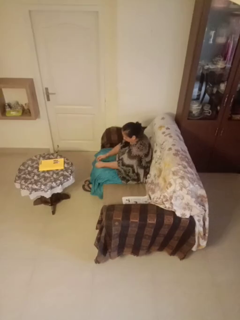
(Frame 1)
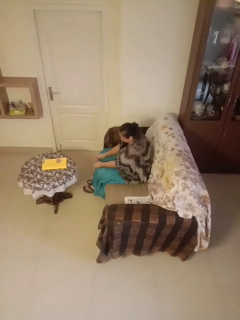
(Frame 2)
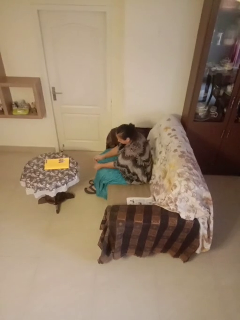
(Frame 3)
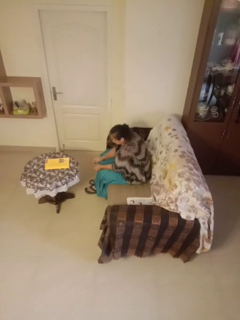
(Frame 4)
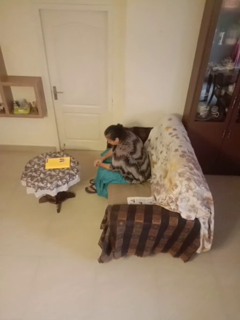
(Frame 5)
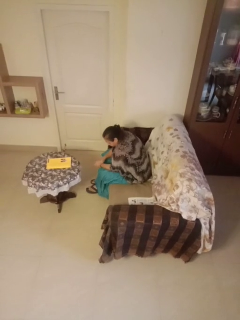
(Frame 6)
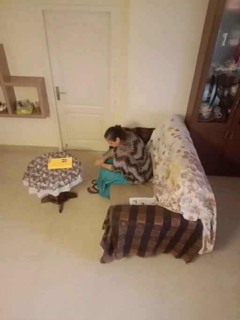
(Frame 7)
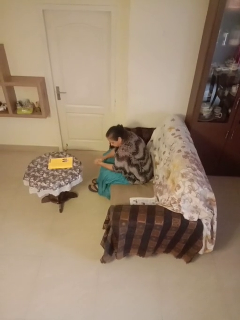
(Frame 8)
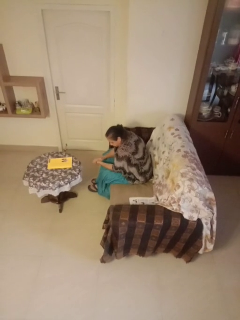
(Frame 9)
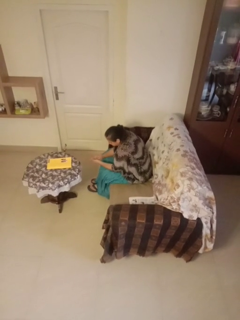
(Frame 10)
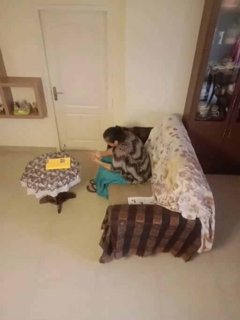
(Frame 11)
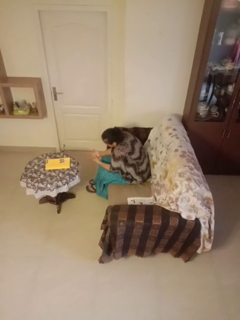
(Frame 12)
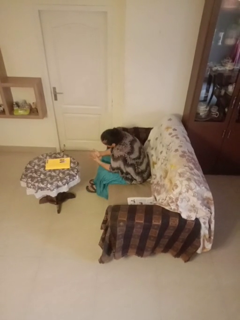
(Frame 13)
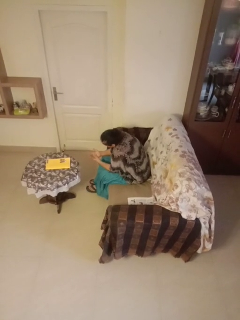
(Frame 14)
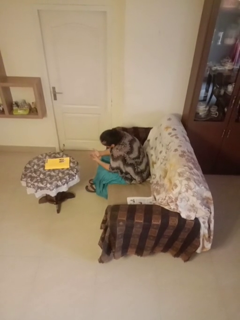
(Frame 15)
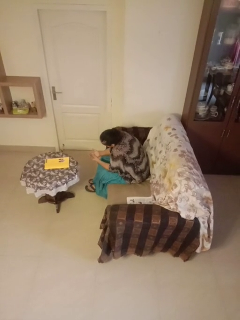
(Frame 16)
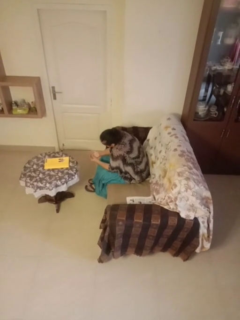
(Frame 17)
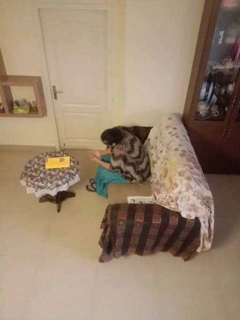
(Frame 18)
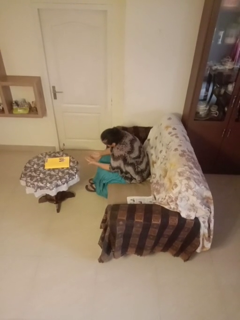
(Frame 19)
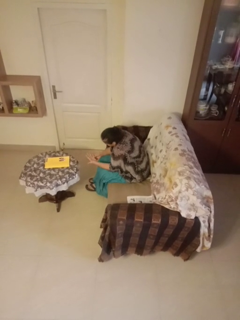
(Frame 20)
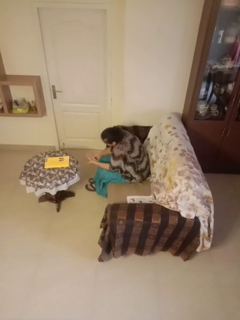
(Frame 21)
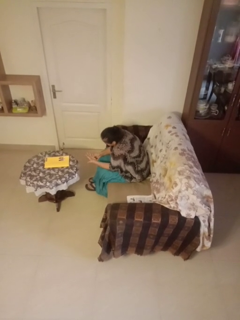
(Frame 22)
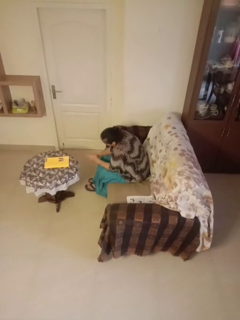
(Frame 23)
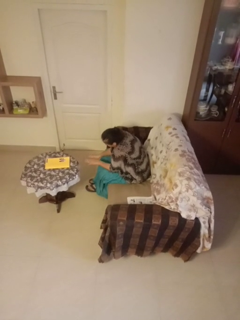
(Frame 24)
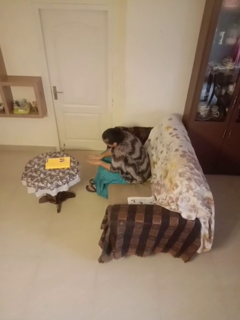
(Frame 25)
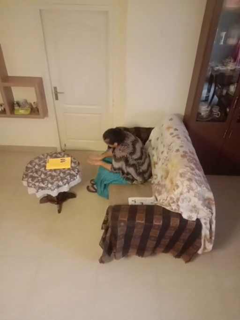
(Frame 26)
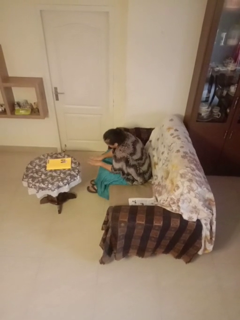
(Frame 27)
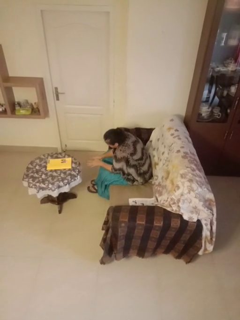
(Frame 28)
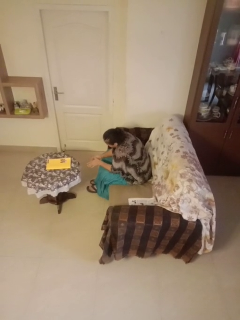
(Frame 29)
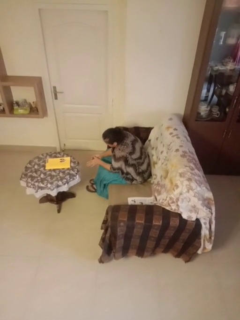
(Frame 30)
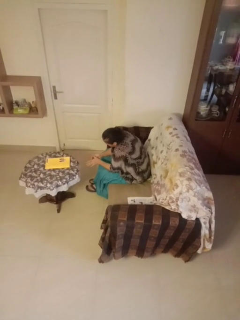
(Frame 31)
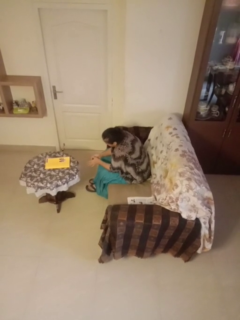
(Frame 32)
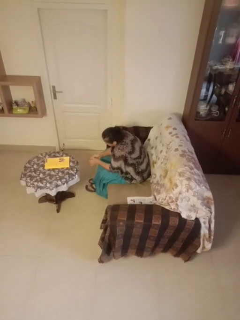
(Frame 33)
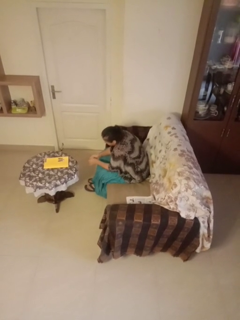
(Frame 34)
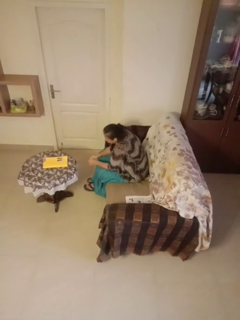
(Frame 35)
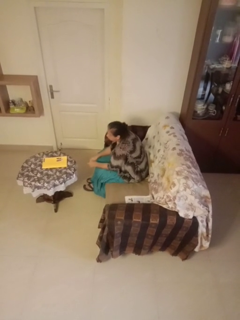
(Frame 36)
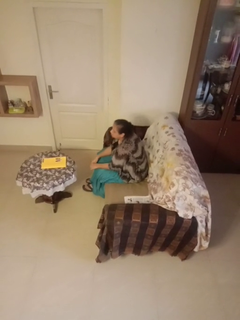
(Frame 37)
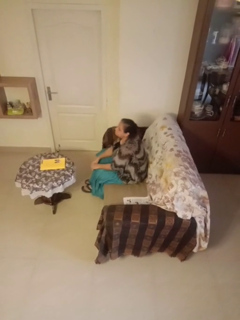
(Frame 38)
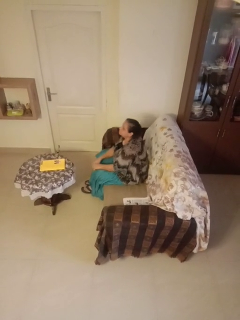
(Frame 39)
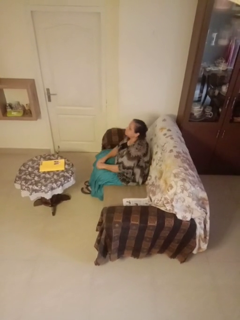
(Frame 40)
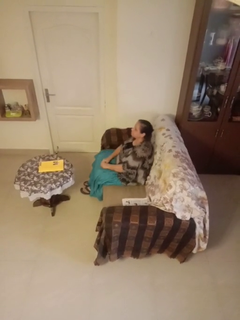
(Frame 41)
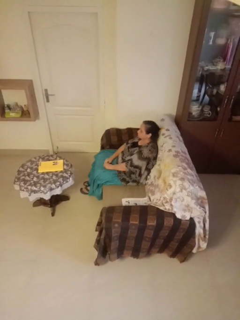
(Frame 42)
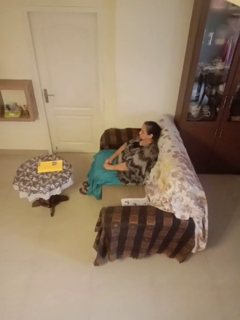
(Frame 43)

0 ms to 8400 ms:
person looks at hands in lap

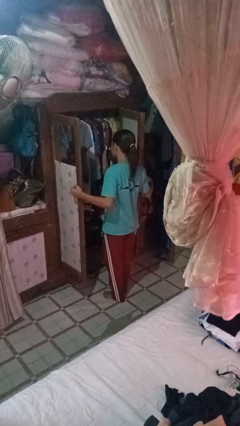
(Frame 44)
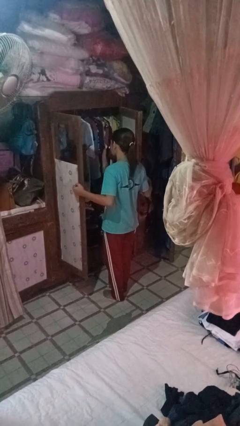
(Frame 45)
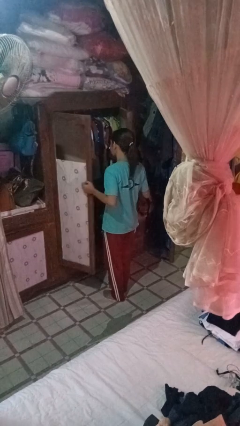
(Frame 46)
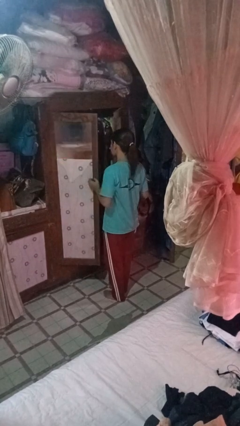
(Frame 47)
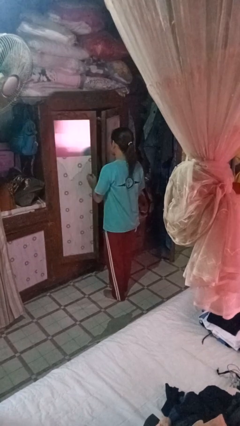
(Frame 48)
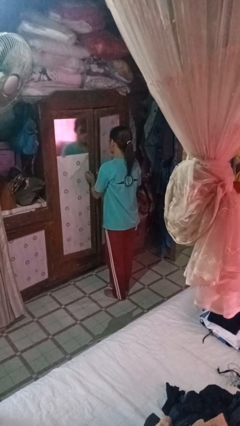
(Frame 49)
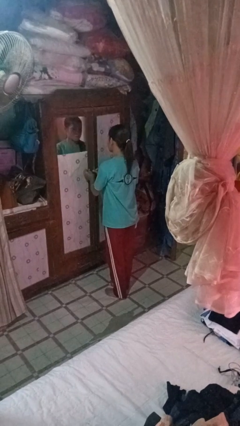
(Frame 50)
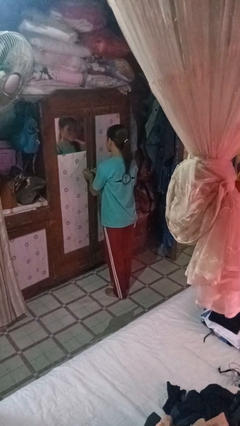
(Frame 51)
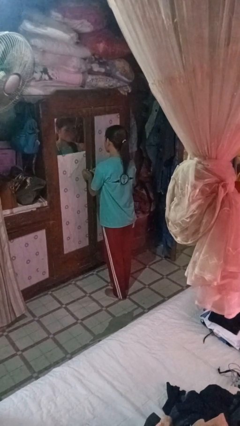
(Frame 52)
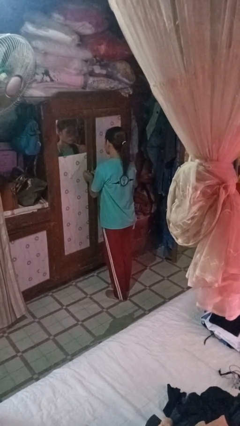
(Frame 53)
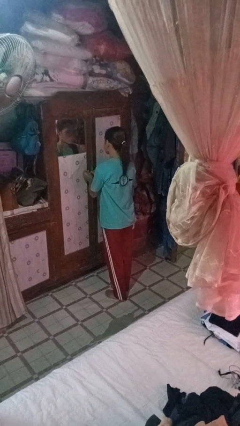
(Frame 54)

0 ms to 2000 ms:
person closes closet door

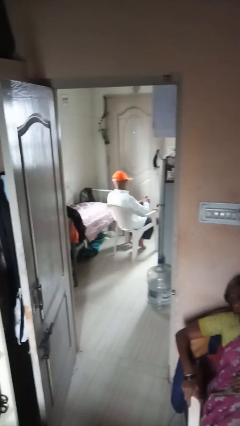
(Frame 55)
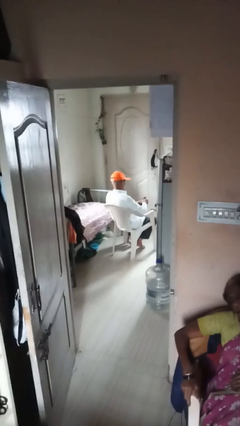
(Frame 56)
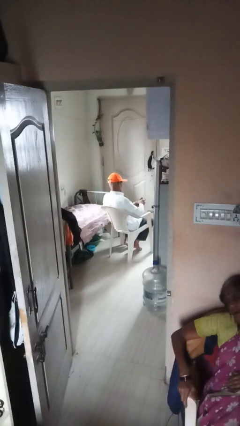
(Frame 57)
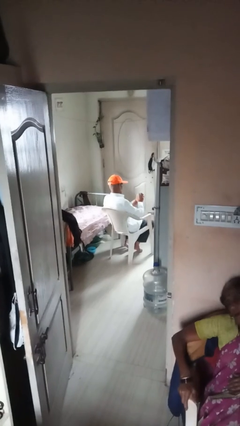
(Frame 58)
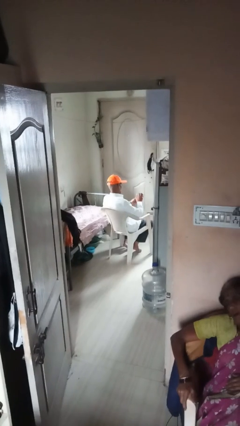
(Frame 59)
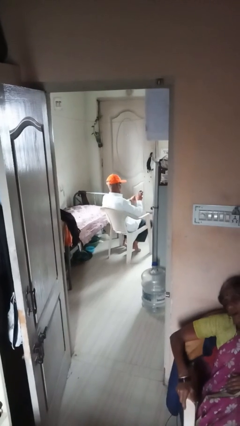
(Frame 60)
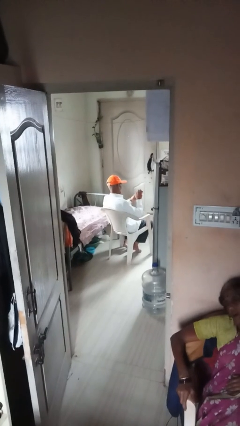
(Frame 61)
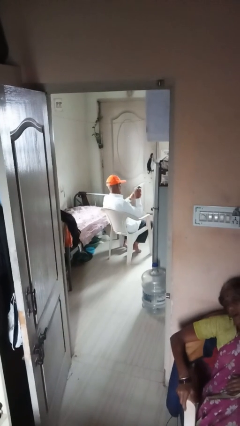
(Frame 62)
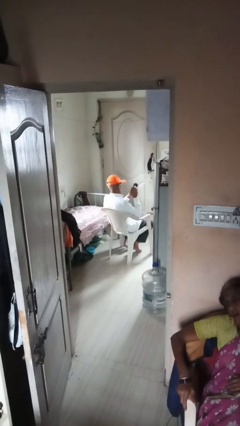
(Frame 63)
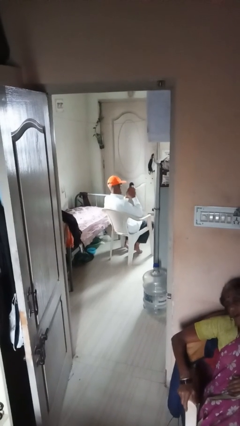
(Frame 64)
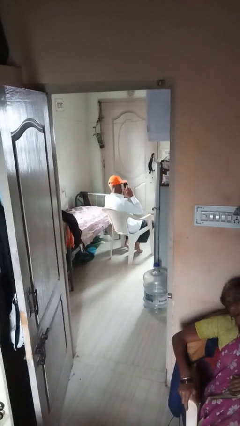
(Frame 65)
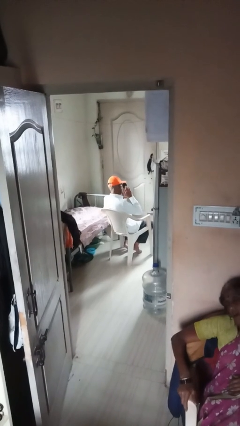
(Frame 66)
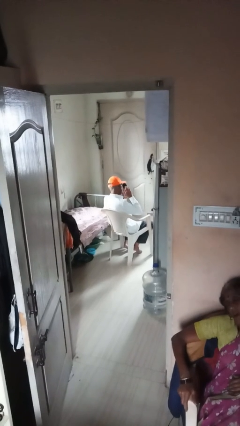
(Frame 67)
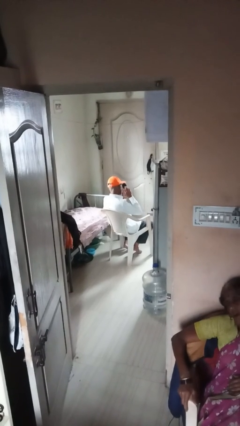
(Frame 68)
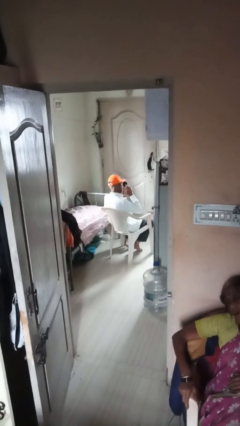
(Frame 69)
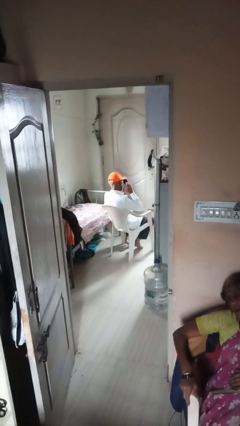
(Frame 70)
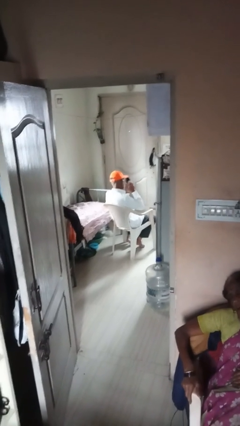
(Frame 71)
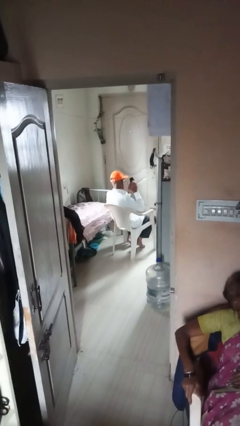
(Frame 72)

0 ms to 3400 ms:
person taps object with finger

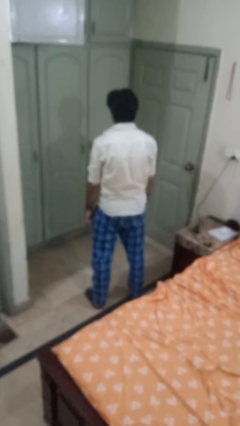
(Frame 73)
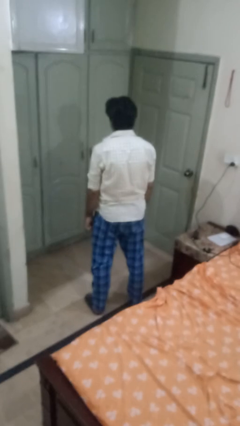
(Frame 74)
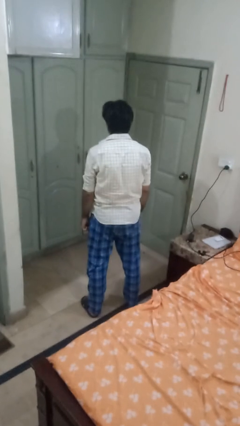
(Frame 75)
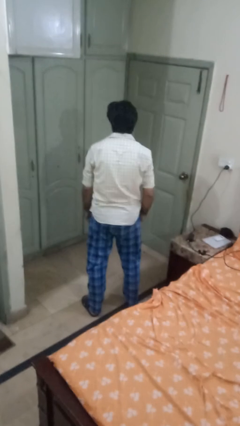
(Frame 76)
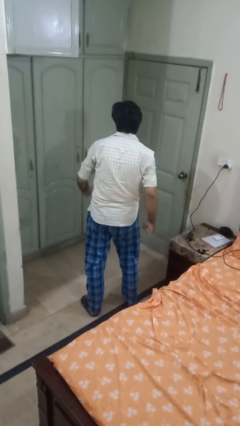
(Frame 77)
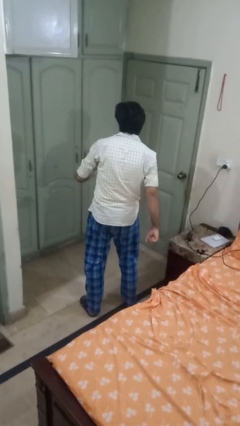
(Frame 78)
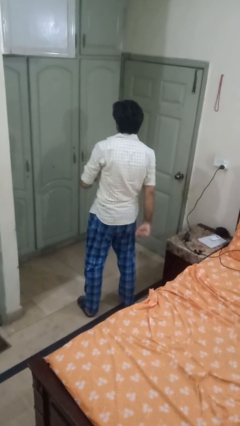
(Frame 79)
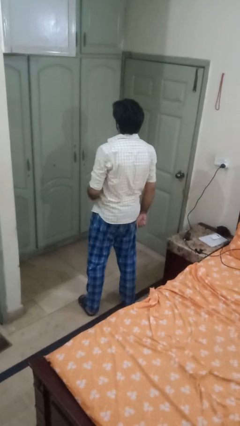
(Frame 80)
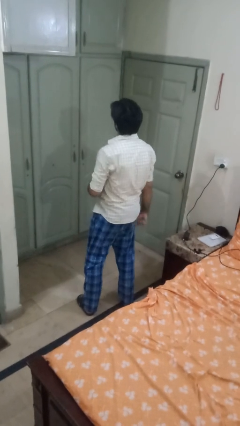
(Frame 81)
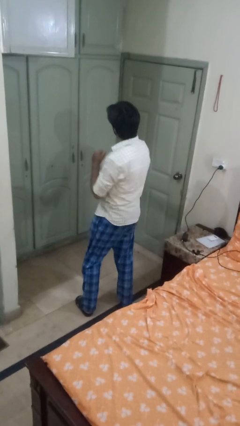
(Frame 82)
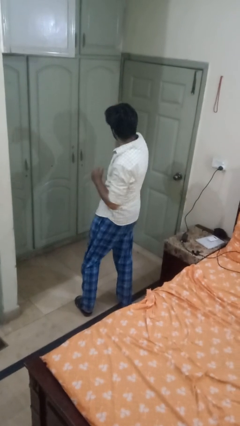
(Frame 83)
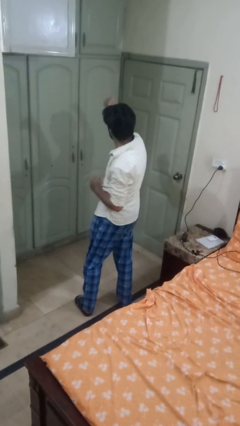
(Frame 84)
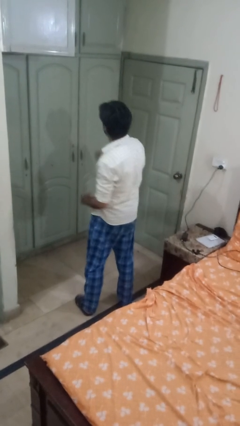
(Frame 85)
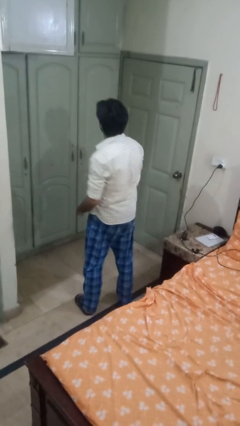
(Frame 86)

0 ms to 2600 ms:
person punches

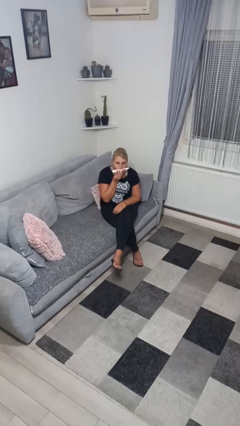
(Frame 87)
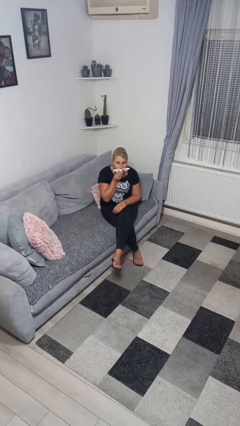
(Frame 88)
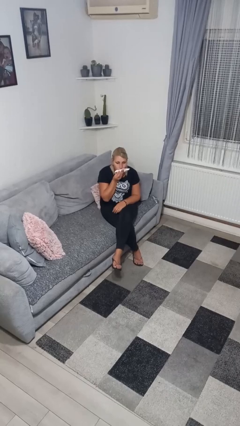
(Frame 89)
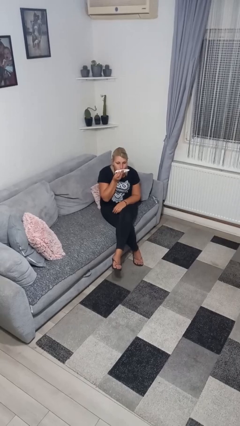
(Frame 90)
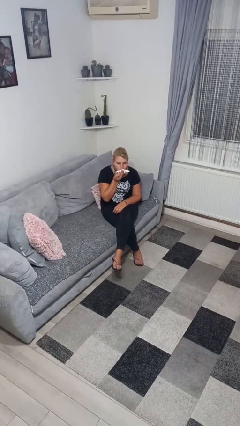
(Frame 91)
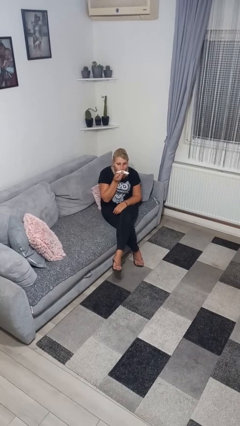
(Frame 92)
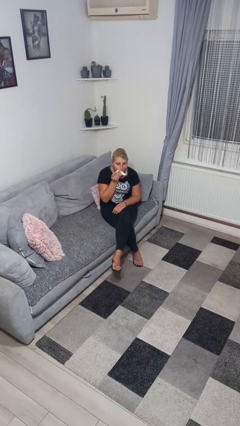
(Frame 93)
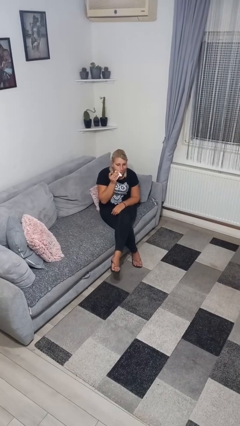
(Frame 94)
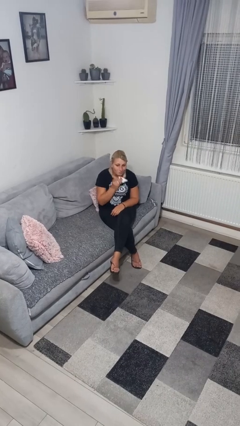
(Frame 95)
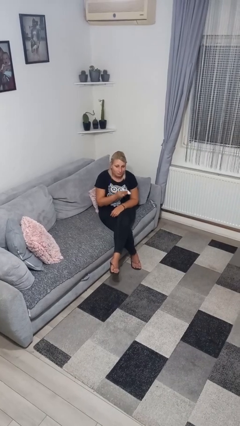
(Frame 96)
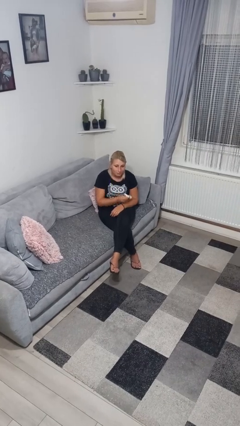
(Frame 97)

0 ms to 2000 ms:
person wipes mouth with napkin

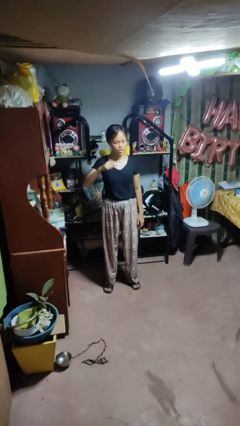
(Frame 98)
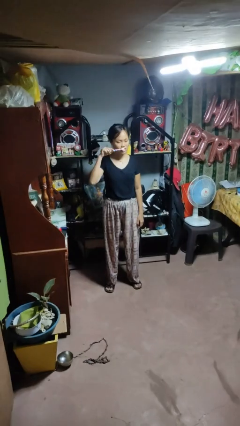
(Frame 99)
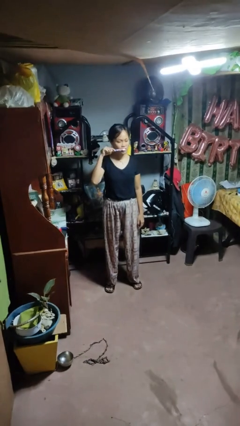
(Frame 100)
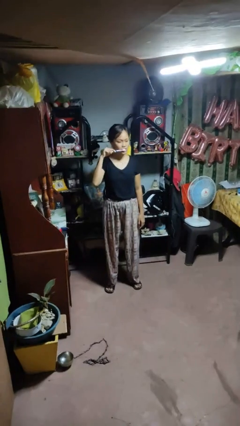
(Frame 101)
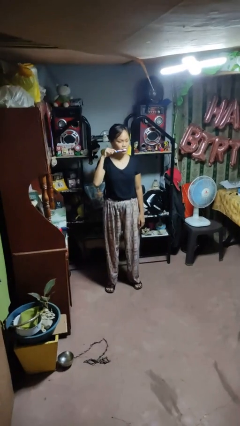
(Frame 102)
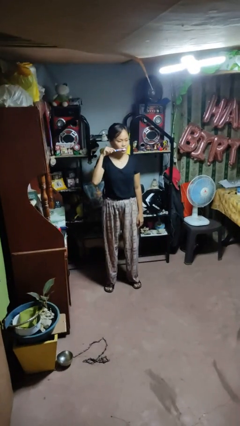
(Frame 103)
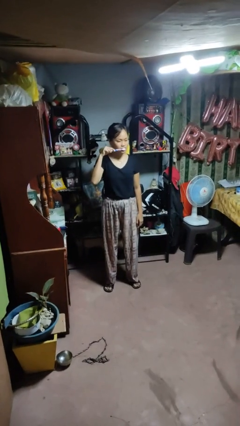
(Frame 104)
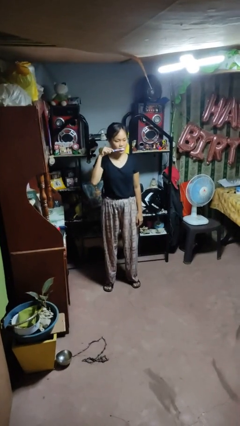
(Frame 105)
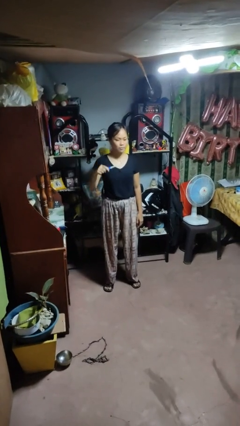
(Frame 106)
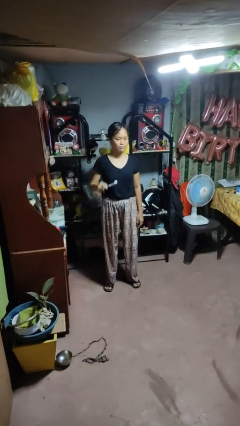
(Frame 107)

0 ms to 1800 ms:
person brushes teeth
